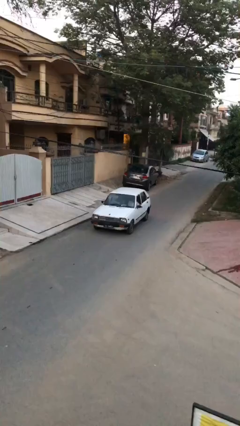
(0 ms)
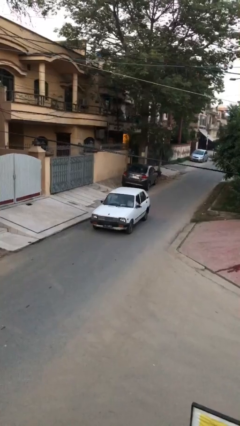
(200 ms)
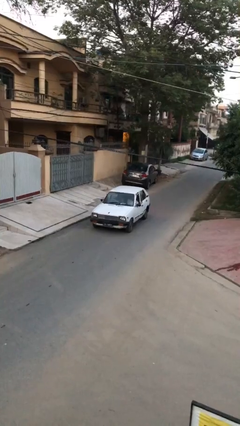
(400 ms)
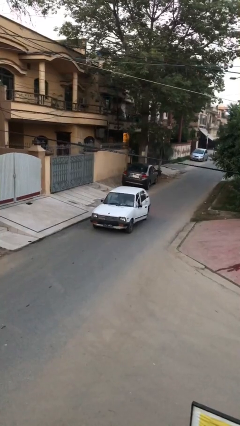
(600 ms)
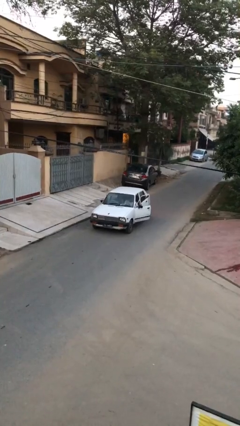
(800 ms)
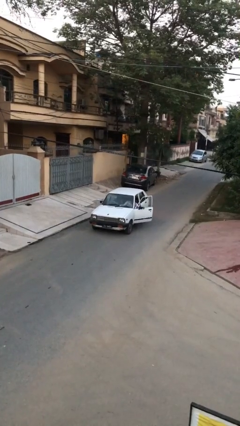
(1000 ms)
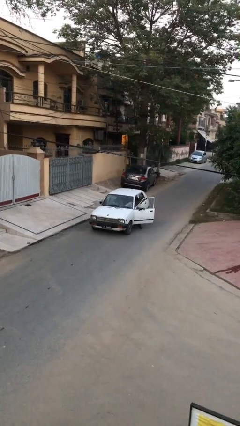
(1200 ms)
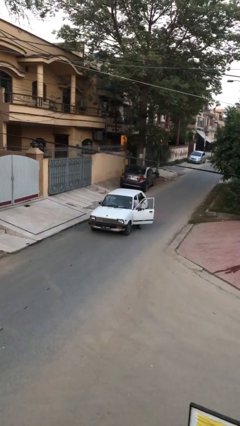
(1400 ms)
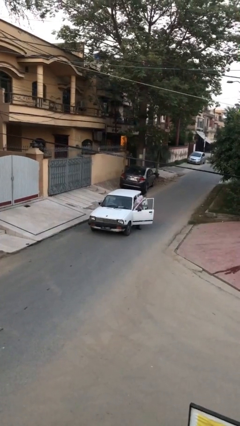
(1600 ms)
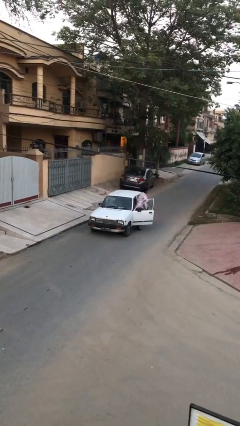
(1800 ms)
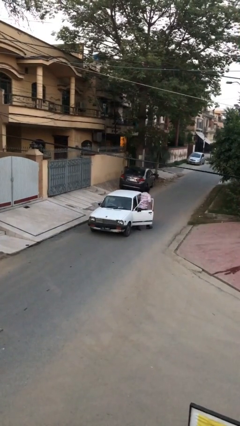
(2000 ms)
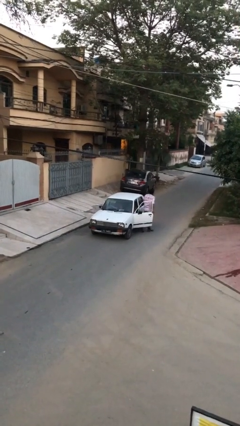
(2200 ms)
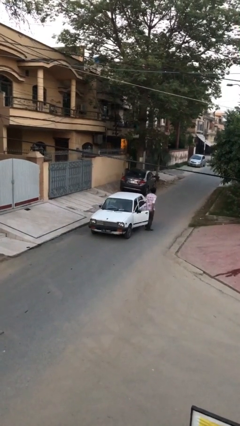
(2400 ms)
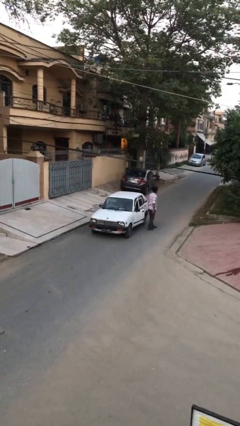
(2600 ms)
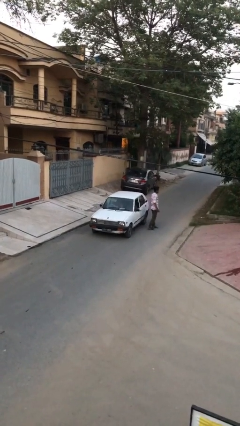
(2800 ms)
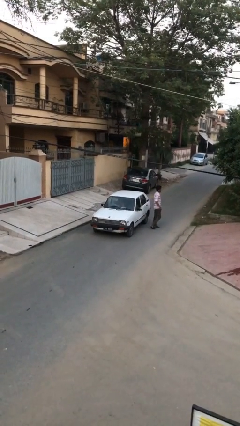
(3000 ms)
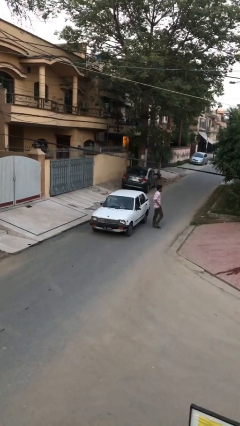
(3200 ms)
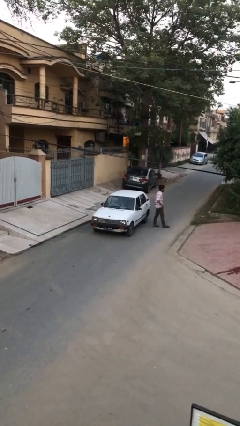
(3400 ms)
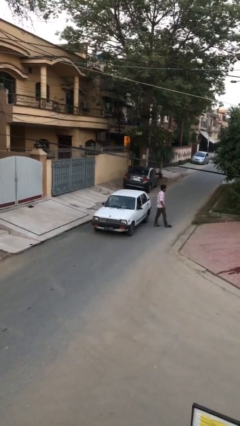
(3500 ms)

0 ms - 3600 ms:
car drops off person

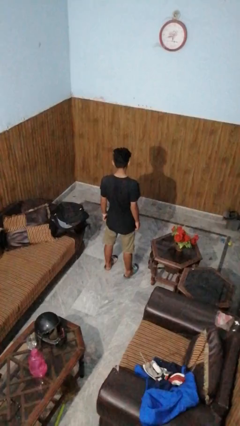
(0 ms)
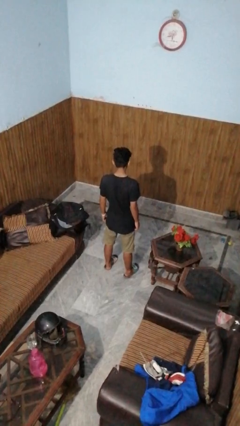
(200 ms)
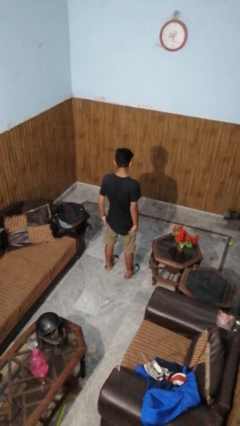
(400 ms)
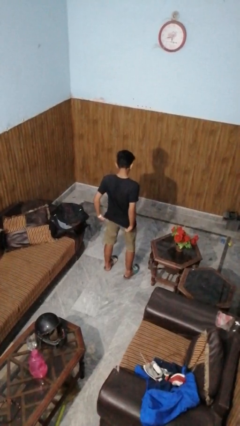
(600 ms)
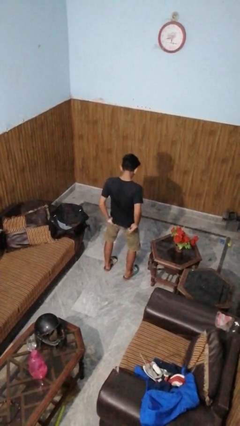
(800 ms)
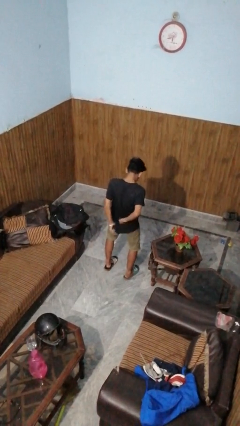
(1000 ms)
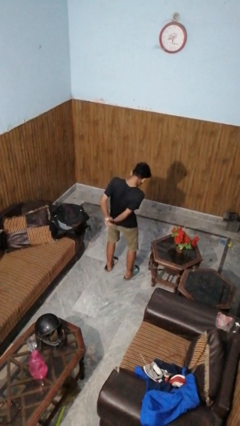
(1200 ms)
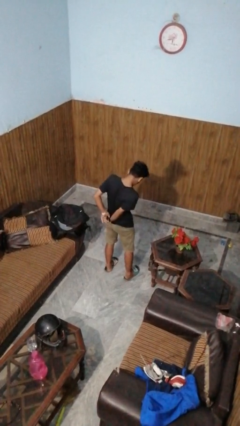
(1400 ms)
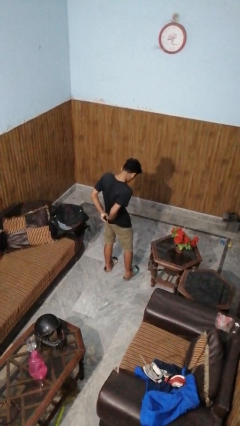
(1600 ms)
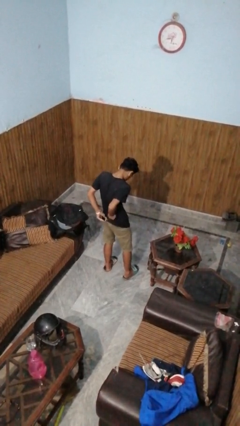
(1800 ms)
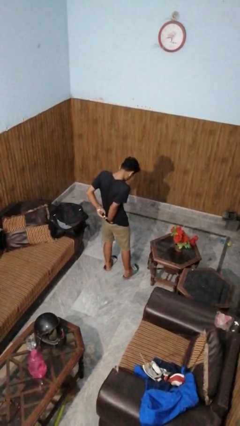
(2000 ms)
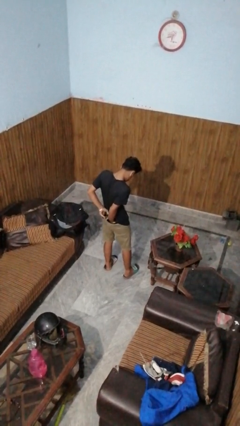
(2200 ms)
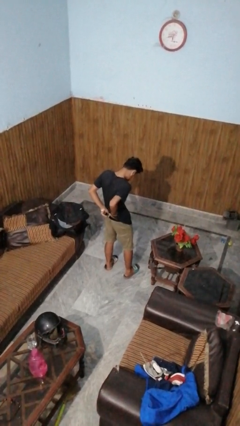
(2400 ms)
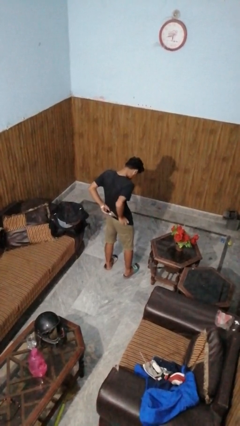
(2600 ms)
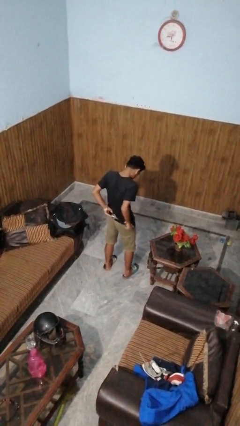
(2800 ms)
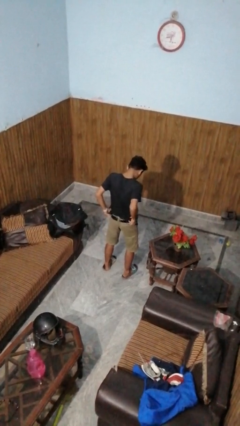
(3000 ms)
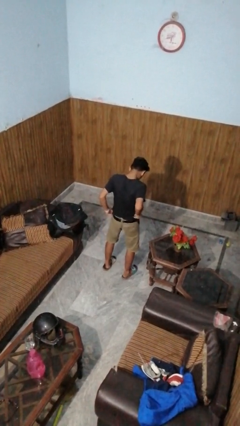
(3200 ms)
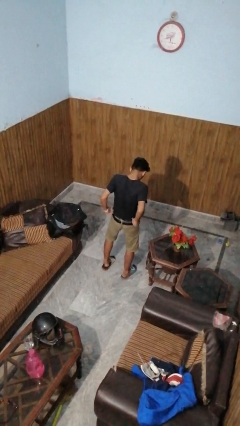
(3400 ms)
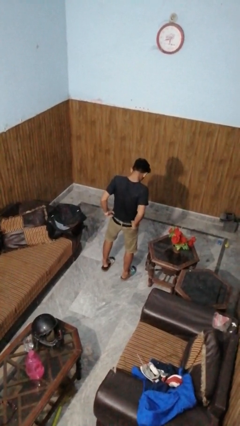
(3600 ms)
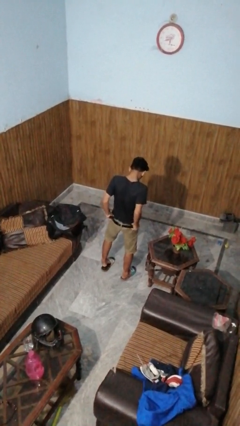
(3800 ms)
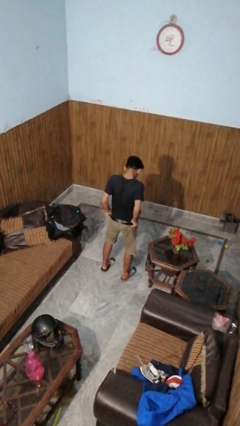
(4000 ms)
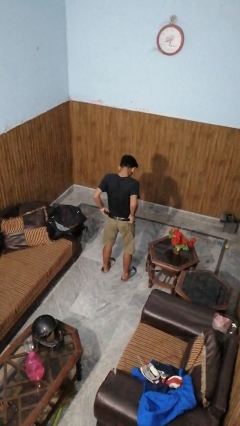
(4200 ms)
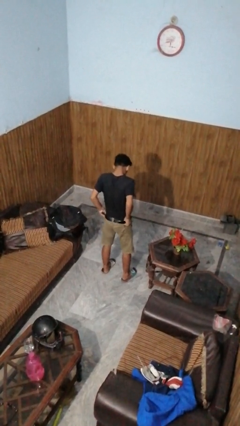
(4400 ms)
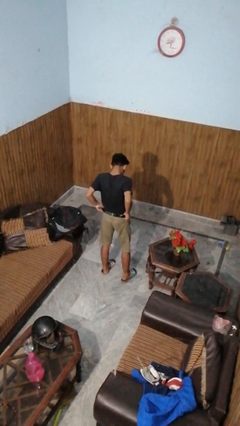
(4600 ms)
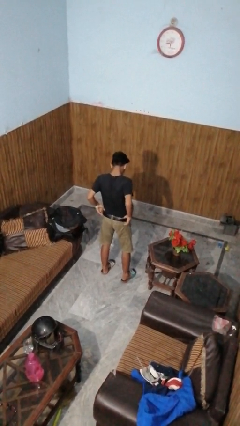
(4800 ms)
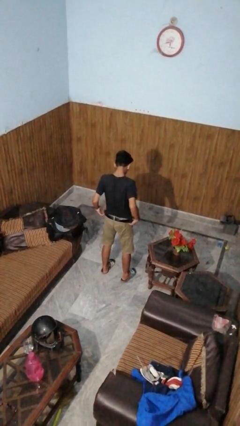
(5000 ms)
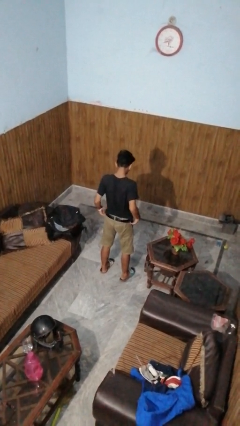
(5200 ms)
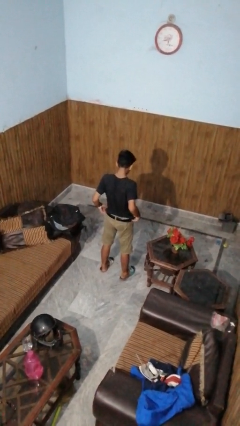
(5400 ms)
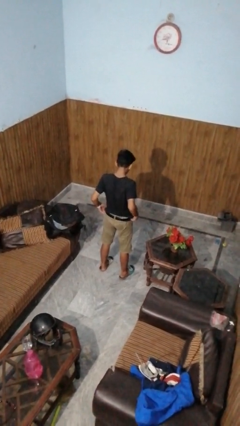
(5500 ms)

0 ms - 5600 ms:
person tucks in shirt

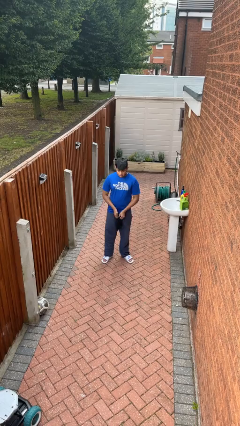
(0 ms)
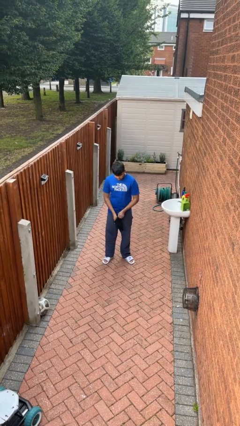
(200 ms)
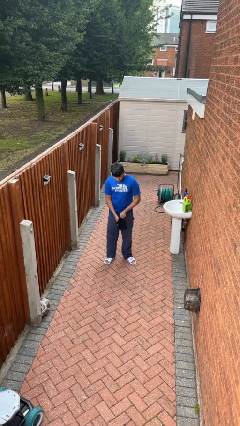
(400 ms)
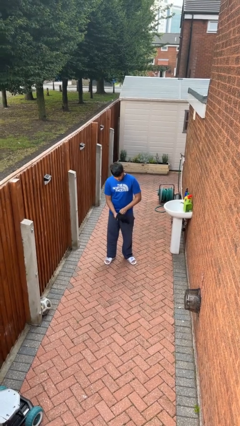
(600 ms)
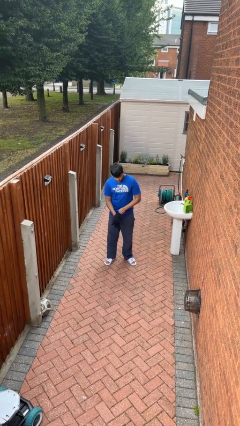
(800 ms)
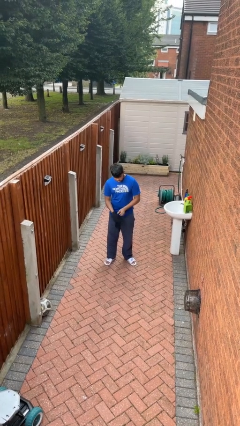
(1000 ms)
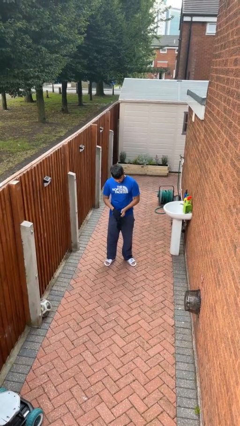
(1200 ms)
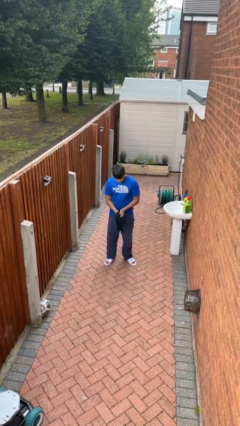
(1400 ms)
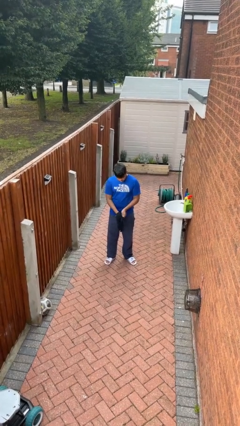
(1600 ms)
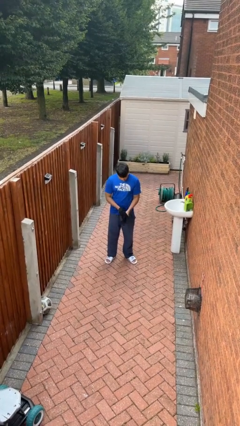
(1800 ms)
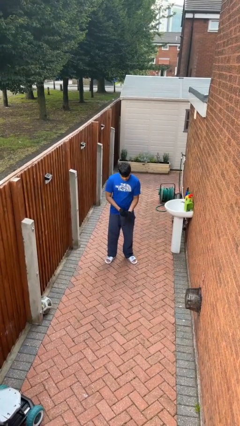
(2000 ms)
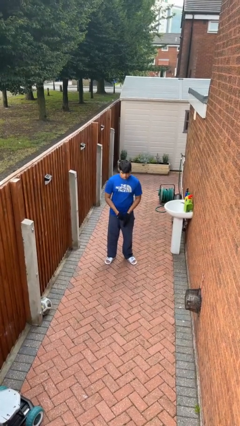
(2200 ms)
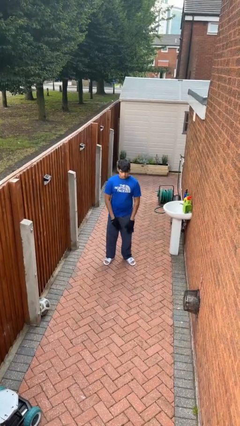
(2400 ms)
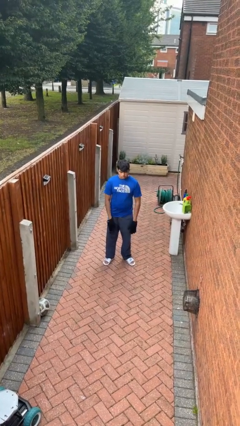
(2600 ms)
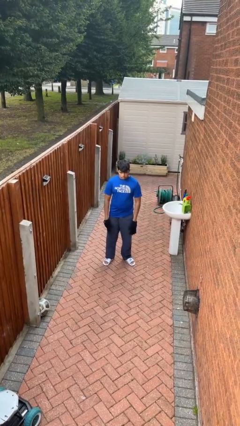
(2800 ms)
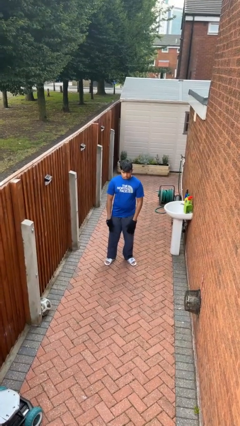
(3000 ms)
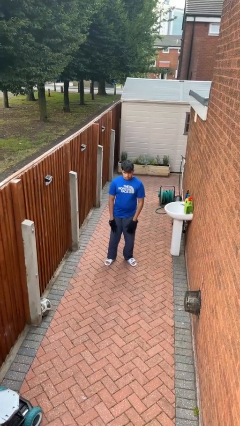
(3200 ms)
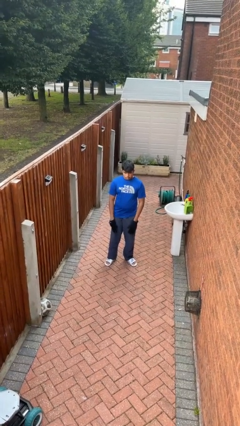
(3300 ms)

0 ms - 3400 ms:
person puts on gloves

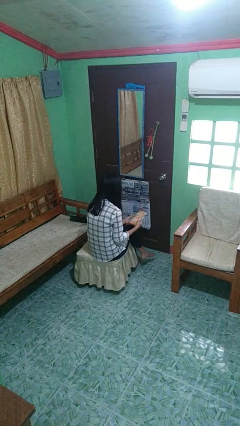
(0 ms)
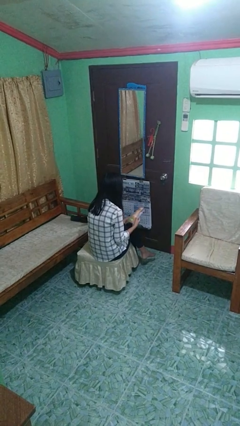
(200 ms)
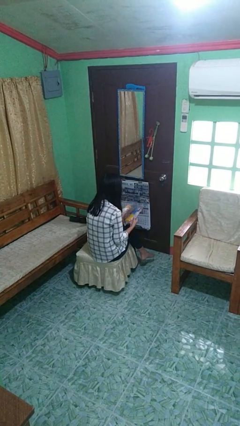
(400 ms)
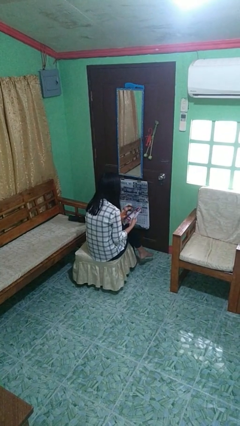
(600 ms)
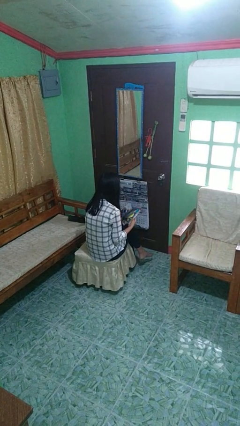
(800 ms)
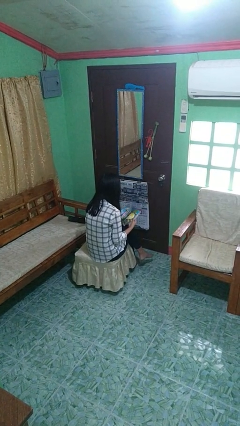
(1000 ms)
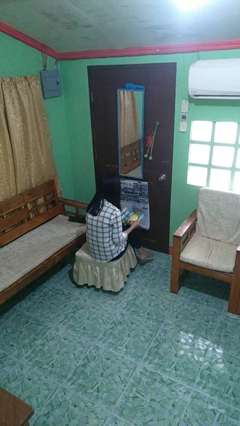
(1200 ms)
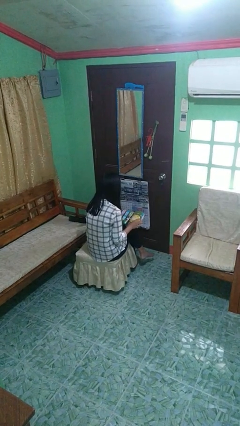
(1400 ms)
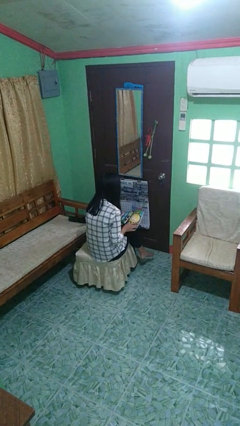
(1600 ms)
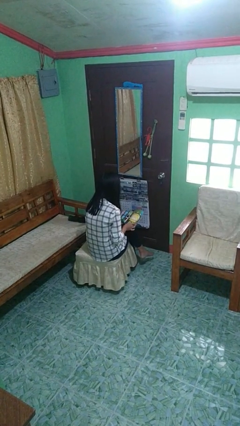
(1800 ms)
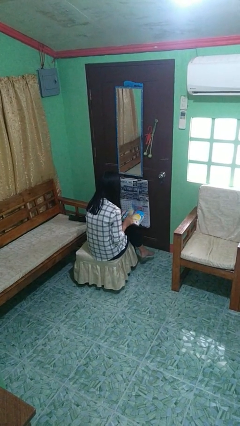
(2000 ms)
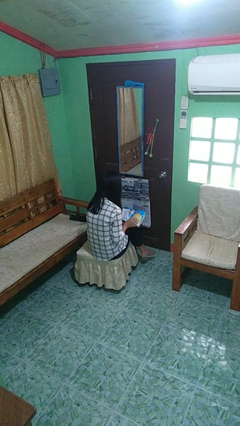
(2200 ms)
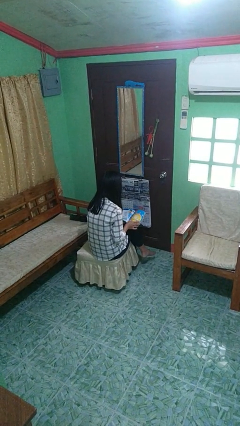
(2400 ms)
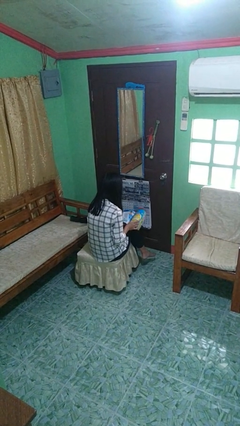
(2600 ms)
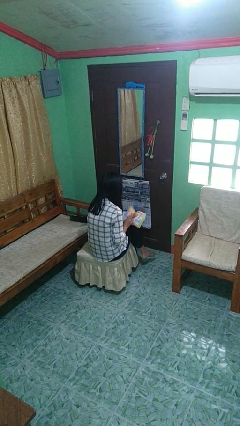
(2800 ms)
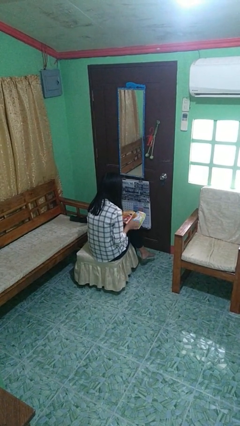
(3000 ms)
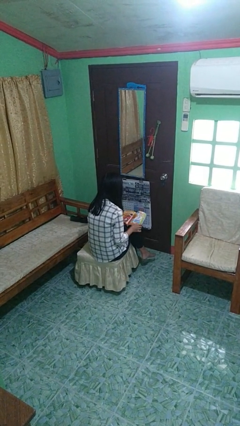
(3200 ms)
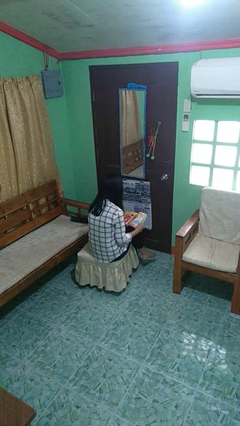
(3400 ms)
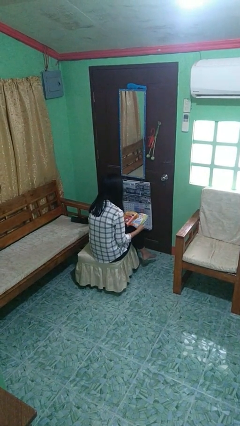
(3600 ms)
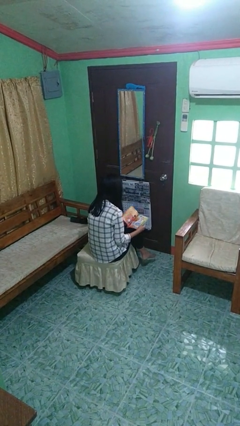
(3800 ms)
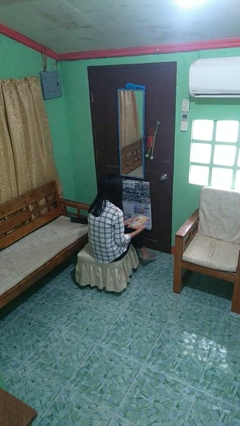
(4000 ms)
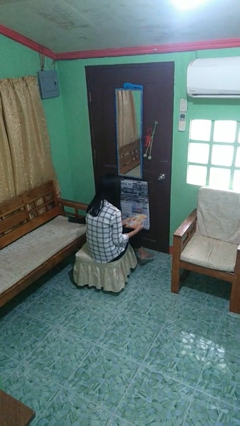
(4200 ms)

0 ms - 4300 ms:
person reads magazine

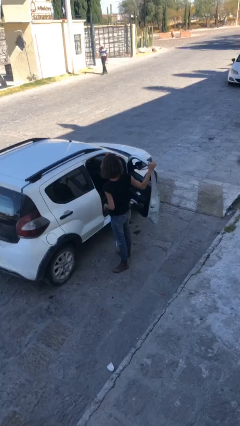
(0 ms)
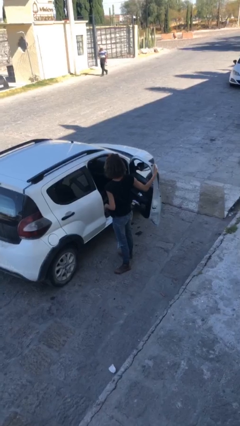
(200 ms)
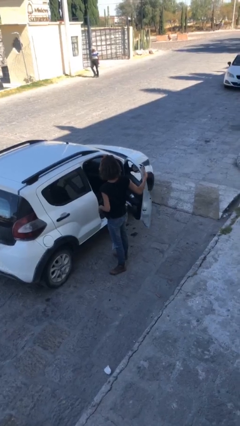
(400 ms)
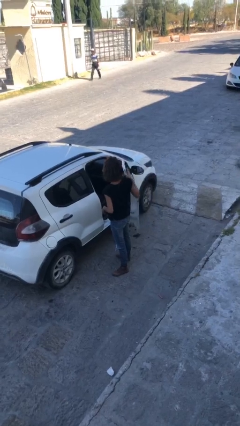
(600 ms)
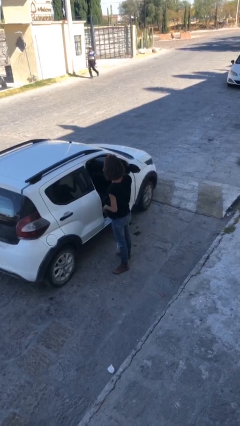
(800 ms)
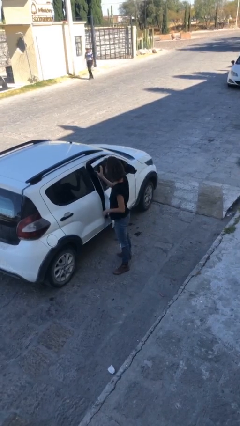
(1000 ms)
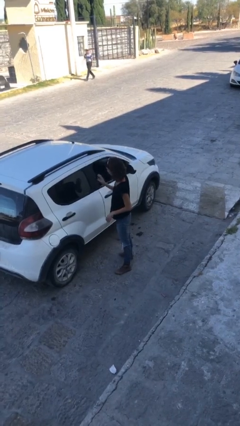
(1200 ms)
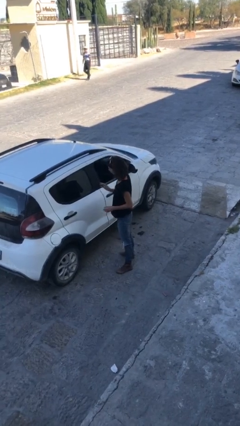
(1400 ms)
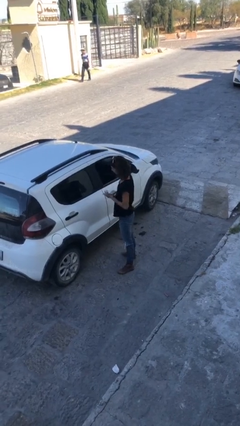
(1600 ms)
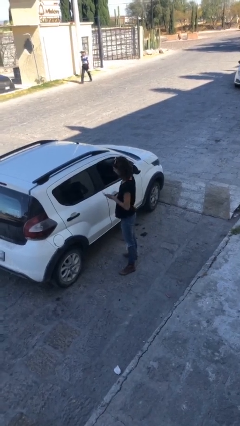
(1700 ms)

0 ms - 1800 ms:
person closes car door
